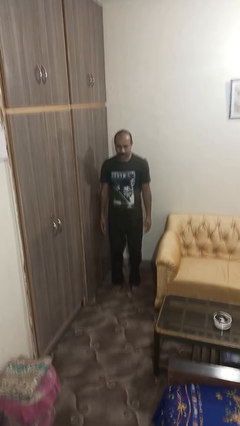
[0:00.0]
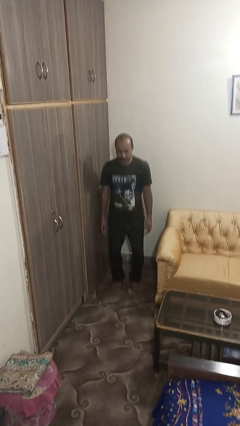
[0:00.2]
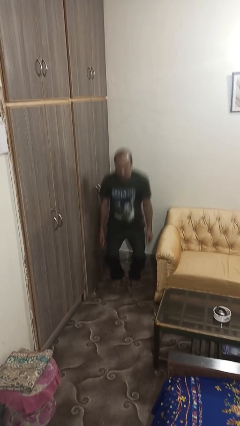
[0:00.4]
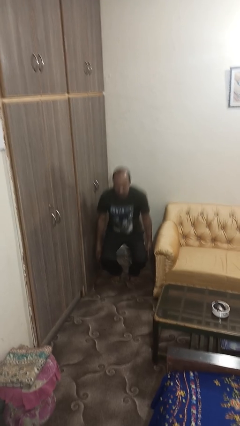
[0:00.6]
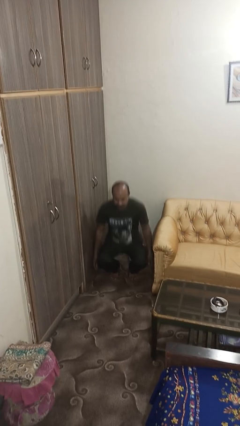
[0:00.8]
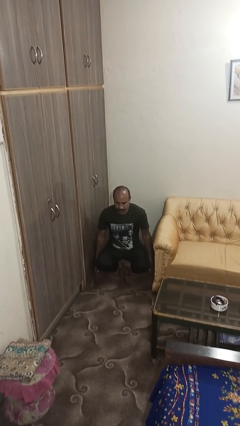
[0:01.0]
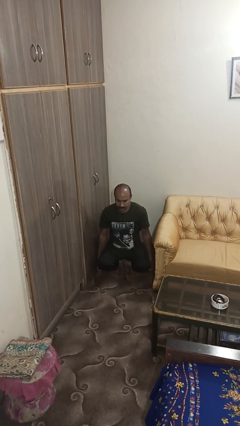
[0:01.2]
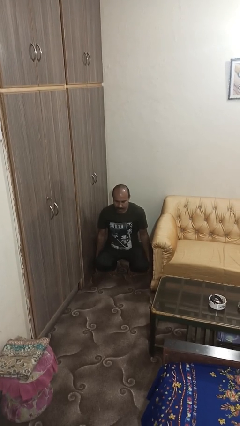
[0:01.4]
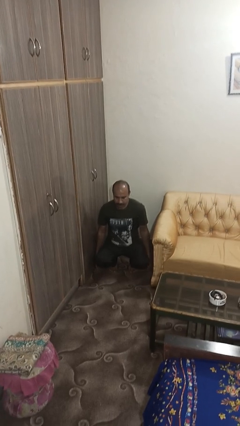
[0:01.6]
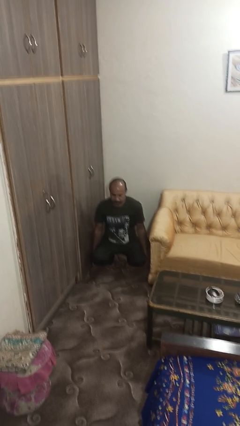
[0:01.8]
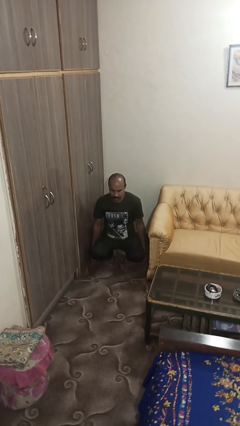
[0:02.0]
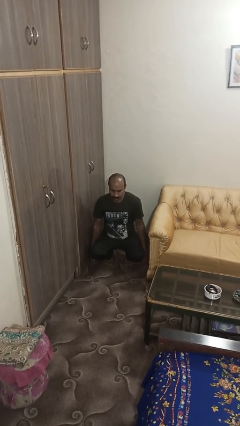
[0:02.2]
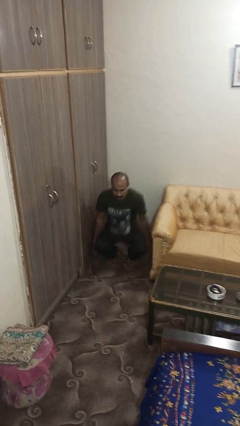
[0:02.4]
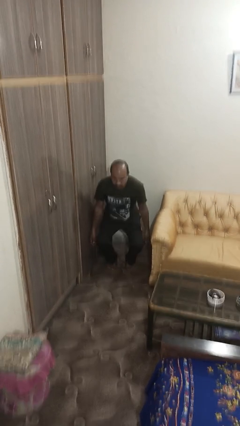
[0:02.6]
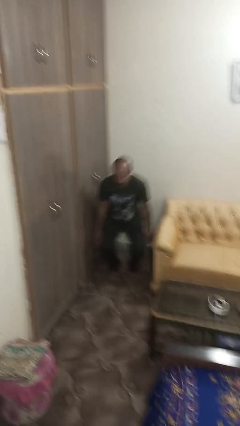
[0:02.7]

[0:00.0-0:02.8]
person squats

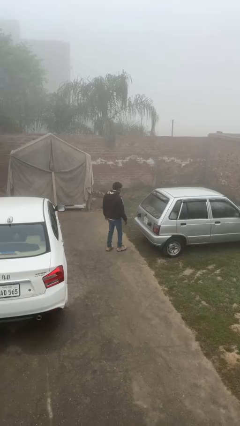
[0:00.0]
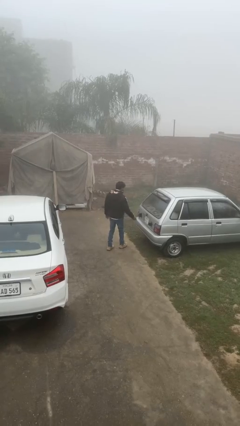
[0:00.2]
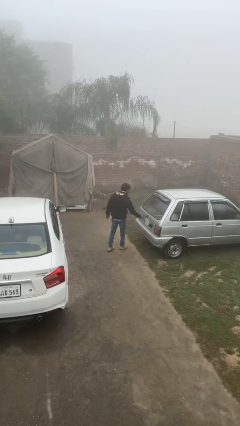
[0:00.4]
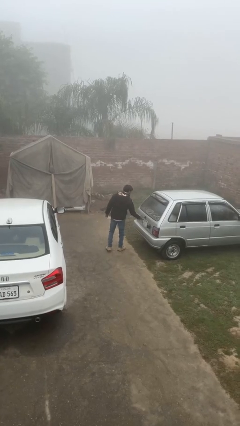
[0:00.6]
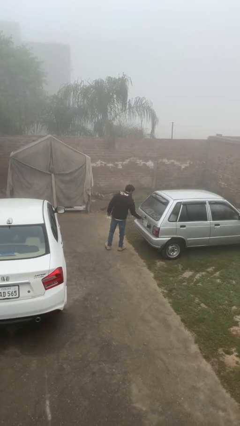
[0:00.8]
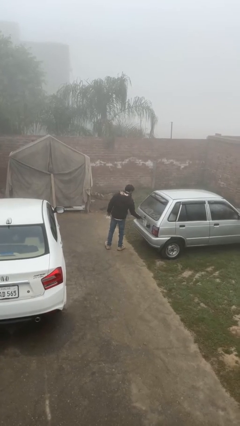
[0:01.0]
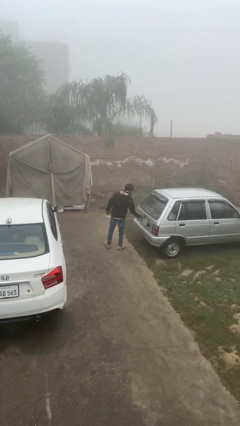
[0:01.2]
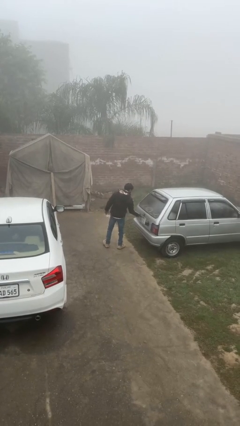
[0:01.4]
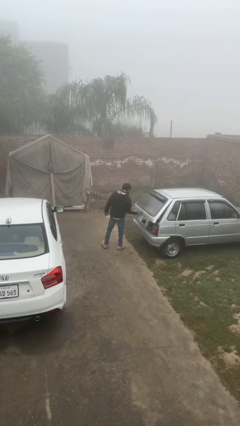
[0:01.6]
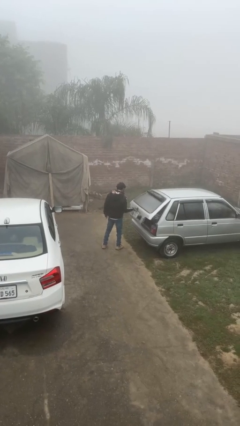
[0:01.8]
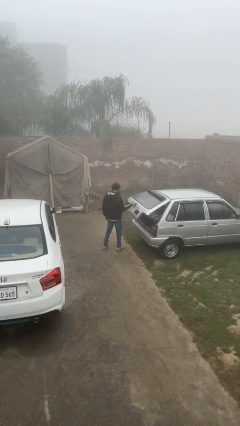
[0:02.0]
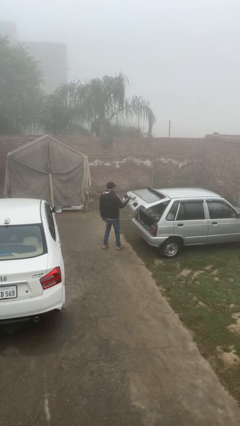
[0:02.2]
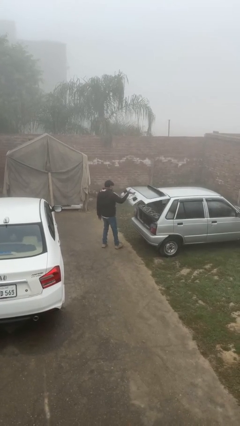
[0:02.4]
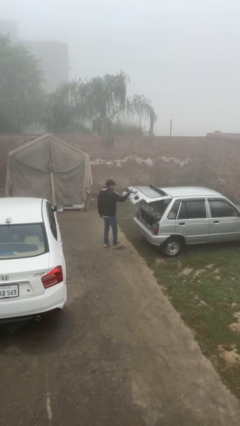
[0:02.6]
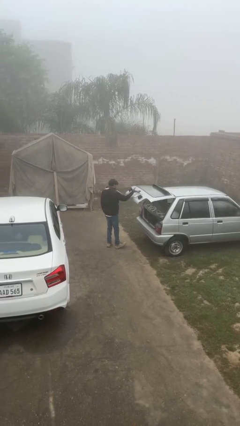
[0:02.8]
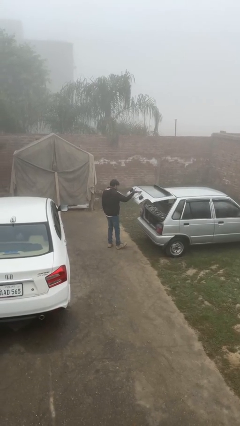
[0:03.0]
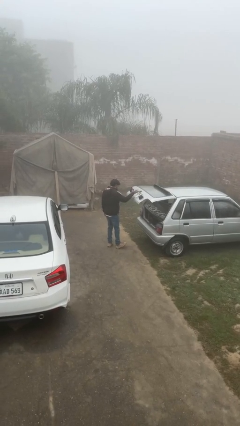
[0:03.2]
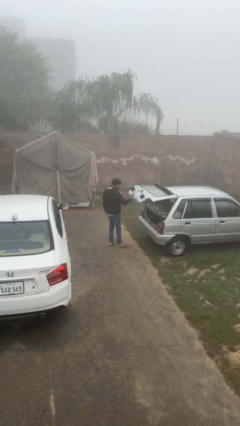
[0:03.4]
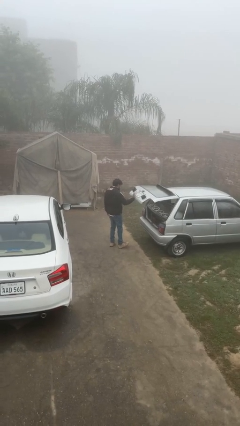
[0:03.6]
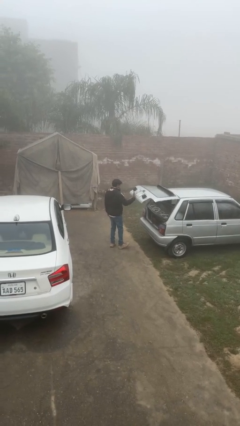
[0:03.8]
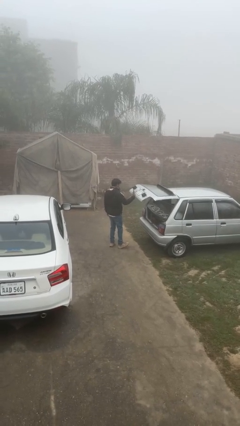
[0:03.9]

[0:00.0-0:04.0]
person opens car trunk

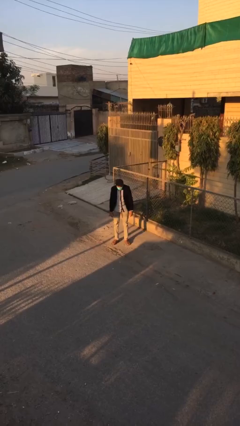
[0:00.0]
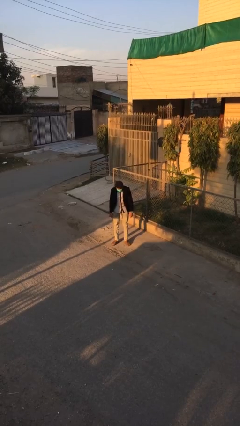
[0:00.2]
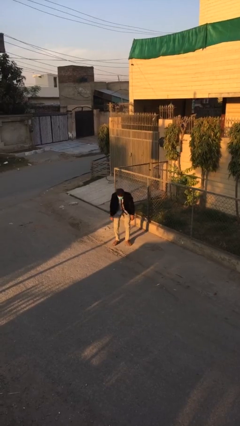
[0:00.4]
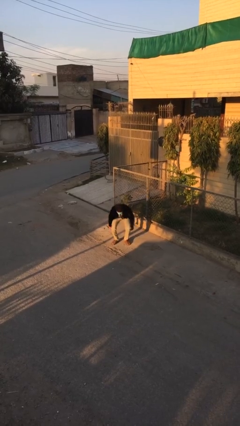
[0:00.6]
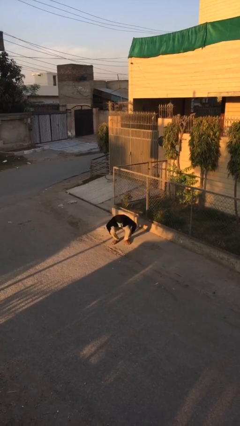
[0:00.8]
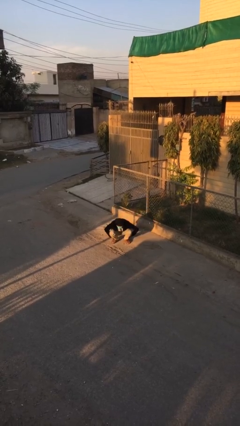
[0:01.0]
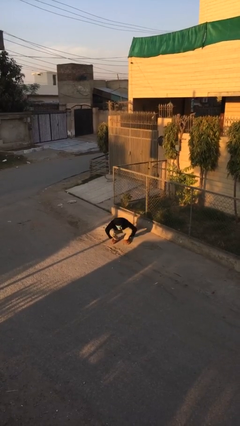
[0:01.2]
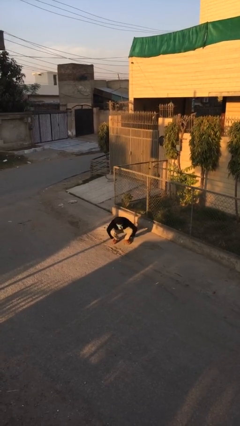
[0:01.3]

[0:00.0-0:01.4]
person sits down

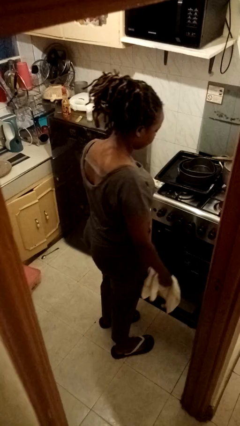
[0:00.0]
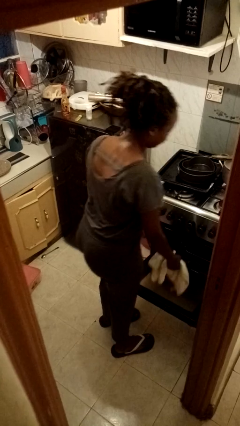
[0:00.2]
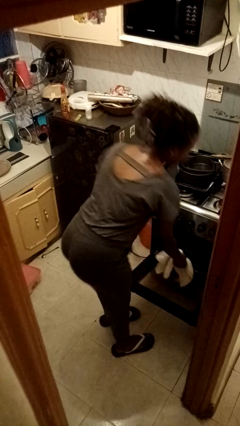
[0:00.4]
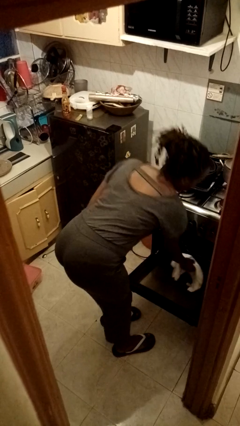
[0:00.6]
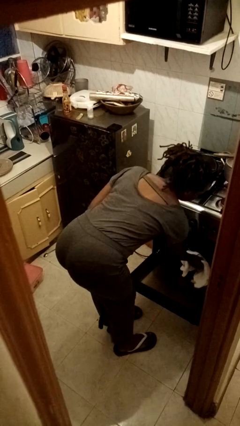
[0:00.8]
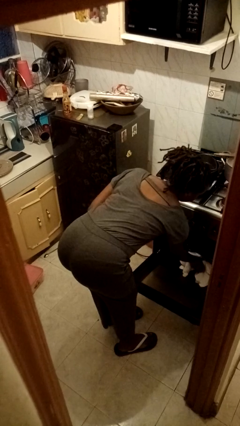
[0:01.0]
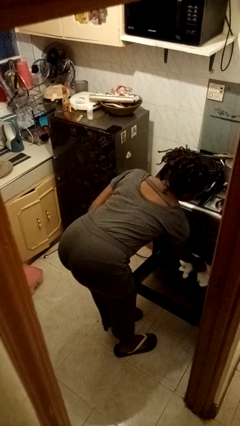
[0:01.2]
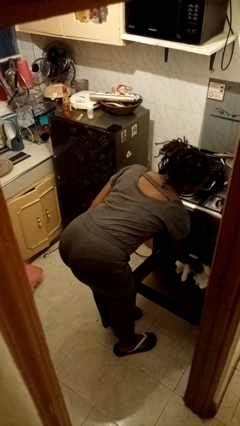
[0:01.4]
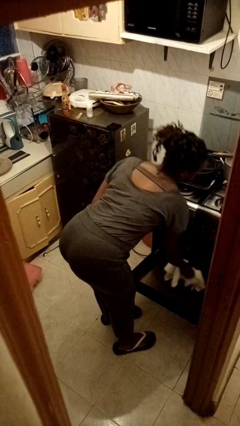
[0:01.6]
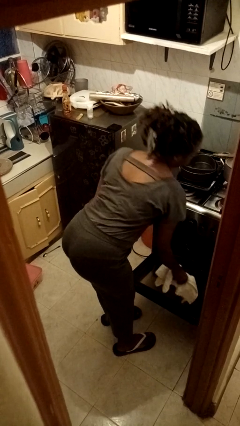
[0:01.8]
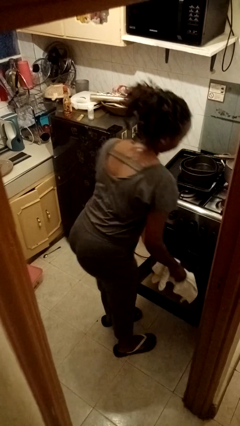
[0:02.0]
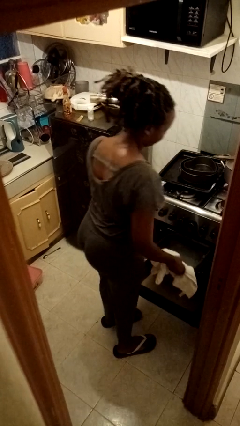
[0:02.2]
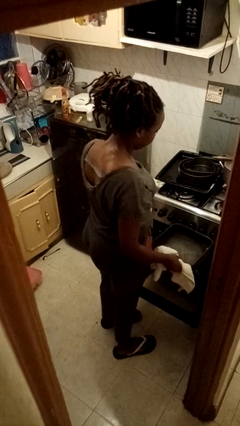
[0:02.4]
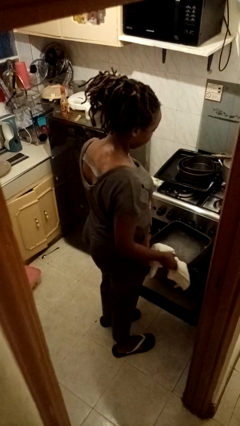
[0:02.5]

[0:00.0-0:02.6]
person takes object from oven

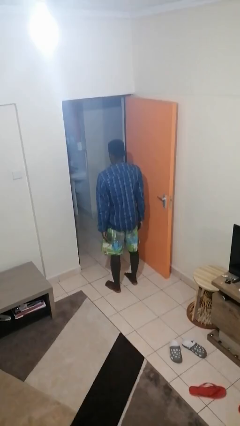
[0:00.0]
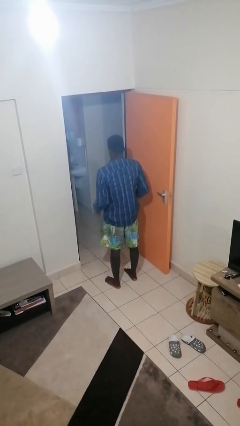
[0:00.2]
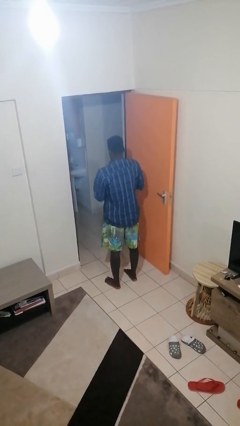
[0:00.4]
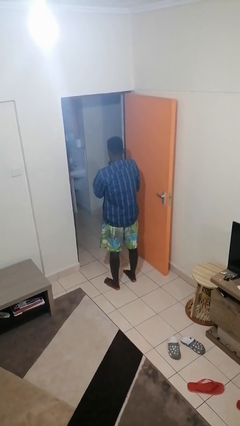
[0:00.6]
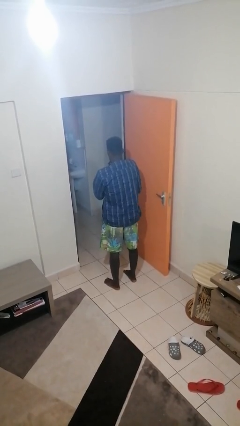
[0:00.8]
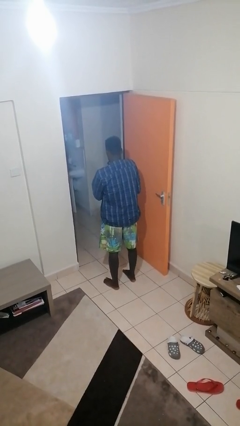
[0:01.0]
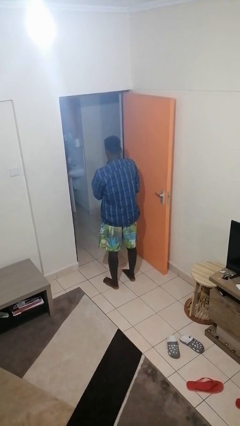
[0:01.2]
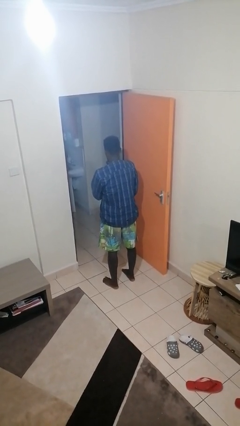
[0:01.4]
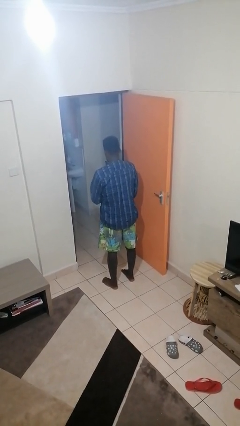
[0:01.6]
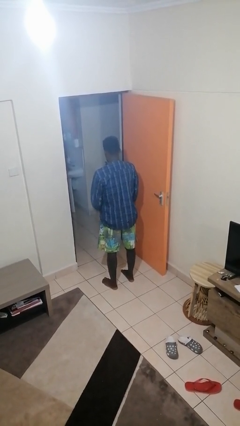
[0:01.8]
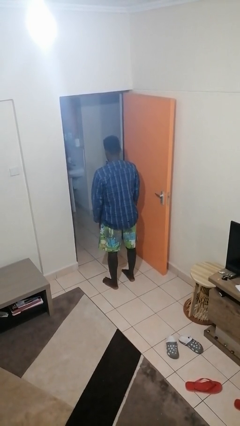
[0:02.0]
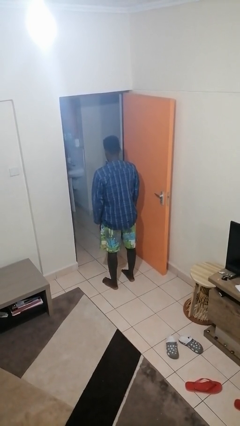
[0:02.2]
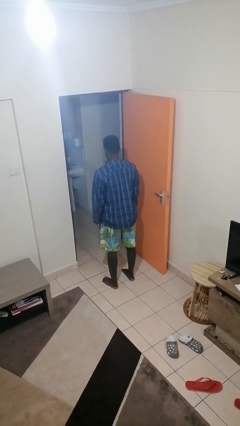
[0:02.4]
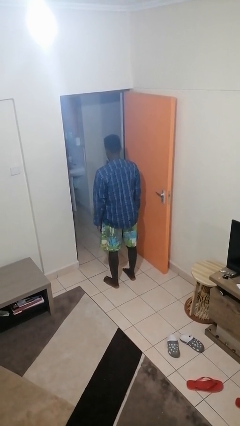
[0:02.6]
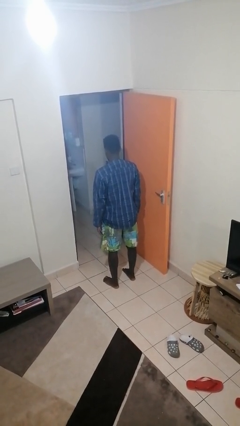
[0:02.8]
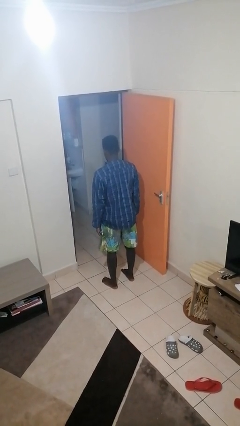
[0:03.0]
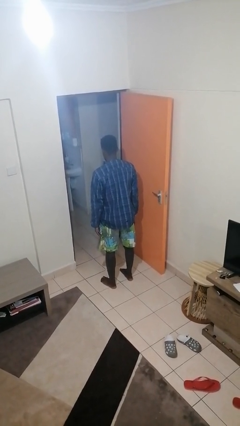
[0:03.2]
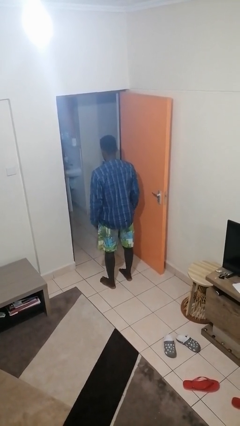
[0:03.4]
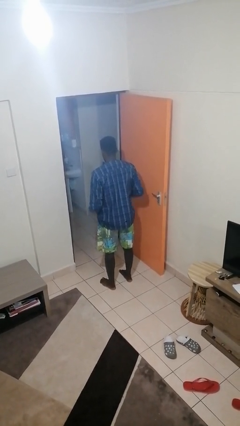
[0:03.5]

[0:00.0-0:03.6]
person unzips jacket

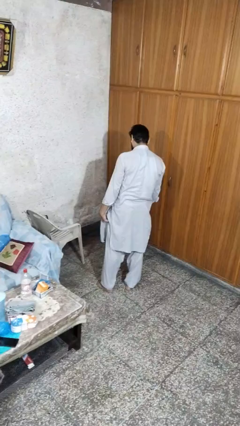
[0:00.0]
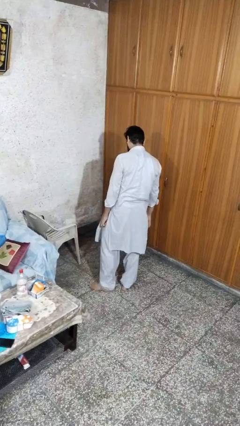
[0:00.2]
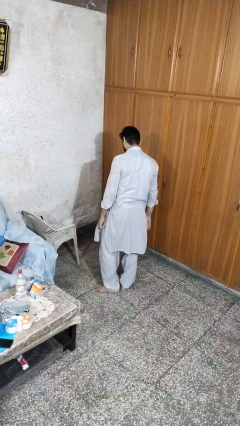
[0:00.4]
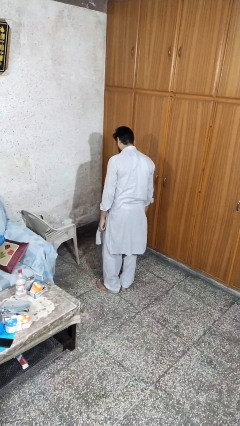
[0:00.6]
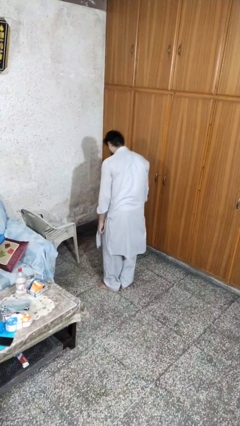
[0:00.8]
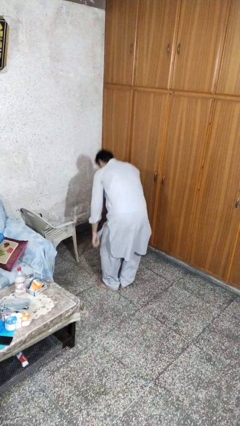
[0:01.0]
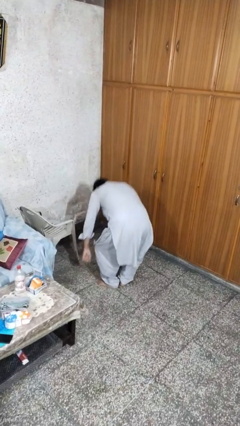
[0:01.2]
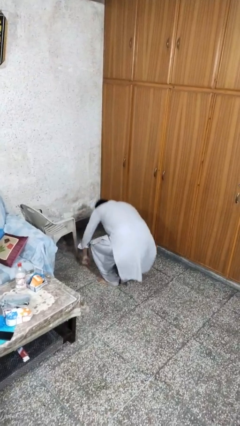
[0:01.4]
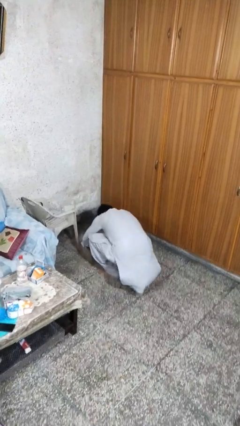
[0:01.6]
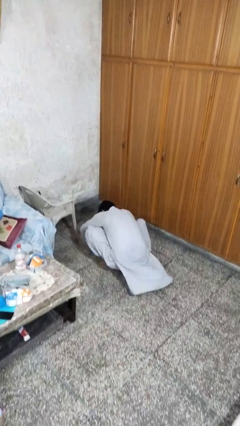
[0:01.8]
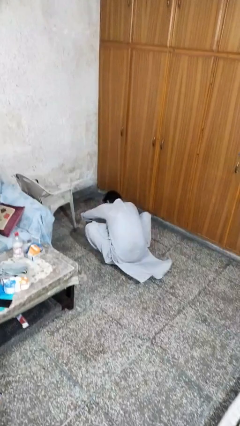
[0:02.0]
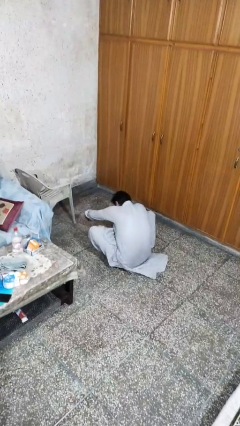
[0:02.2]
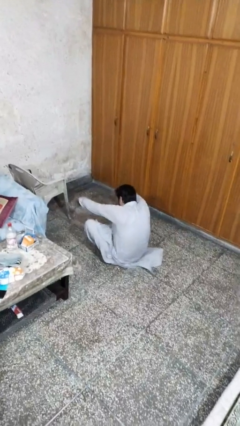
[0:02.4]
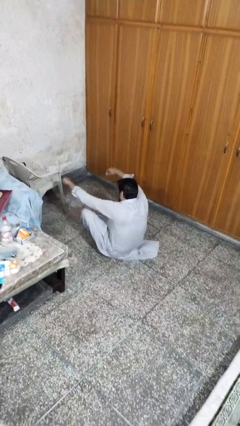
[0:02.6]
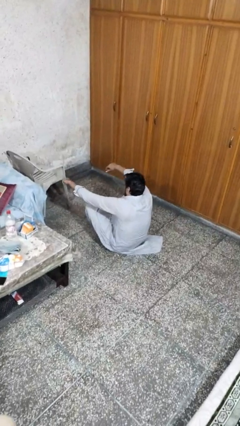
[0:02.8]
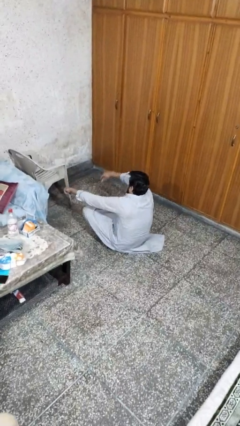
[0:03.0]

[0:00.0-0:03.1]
person sits crisscross
